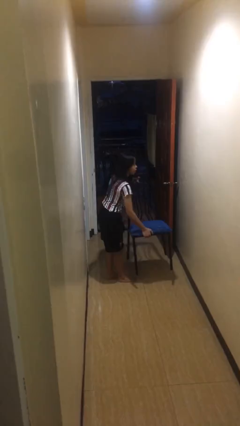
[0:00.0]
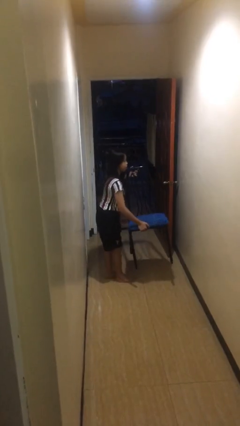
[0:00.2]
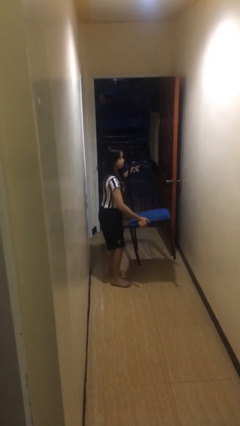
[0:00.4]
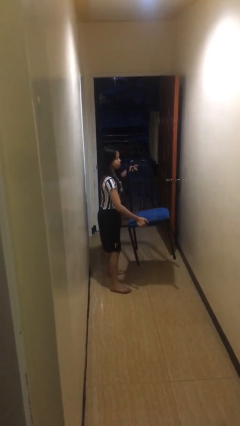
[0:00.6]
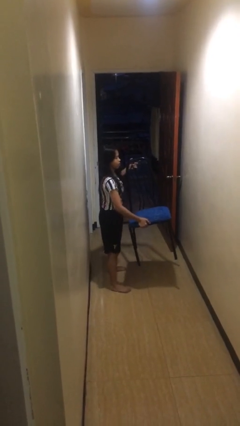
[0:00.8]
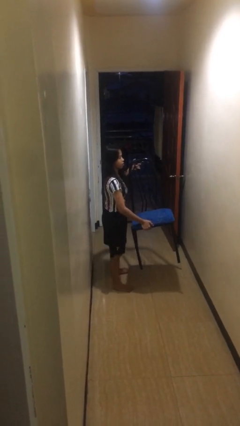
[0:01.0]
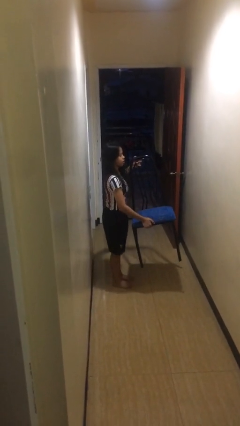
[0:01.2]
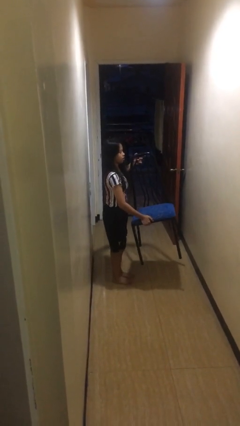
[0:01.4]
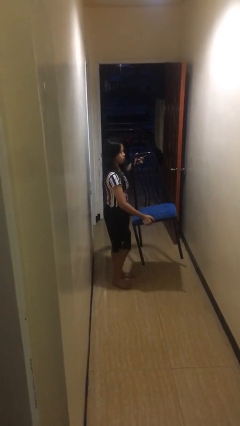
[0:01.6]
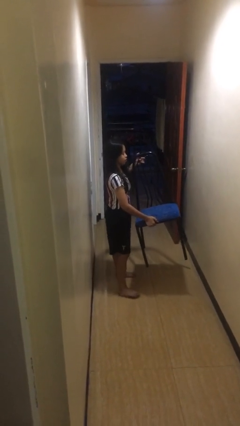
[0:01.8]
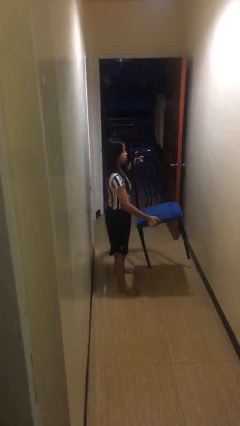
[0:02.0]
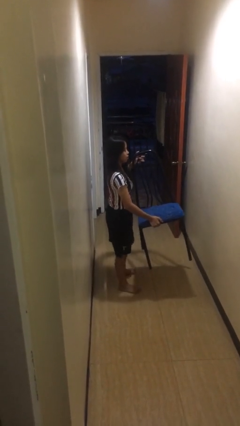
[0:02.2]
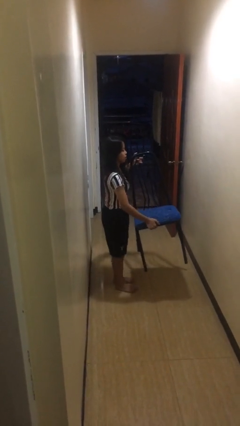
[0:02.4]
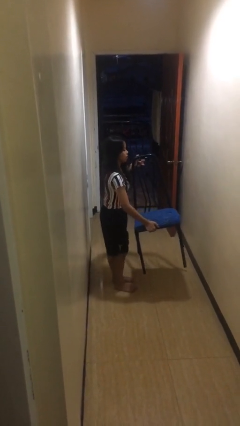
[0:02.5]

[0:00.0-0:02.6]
person carries heavy object

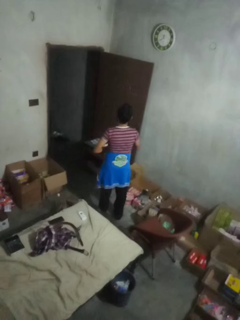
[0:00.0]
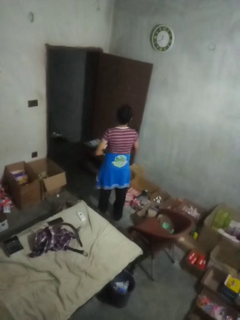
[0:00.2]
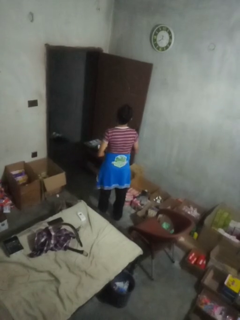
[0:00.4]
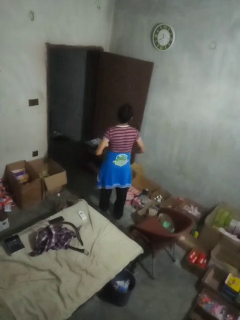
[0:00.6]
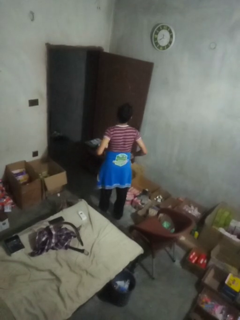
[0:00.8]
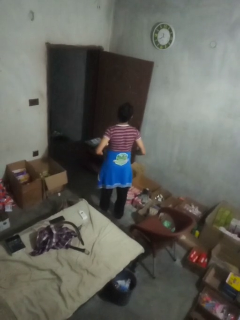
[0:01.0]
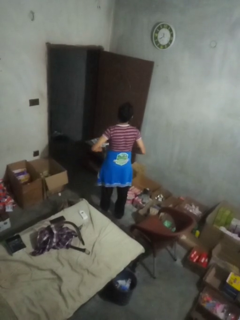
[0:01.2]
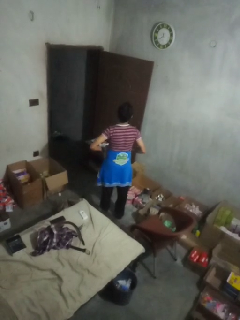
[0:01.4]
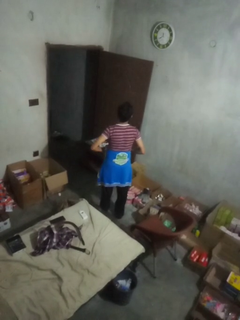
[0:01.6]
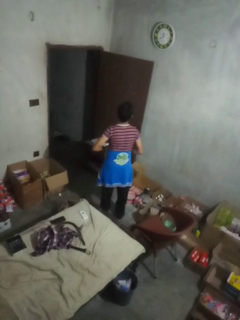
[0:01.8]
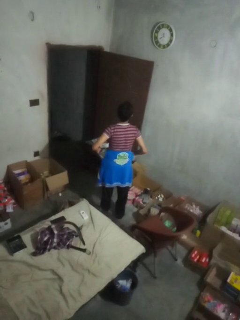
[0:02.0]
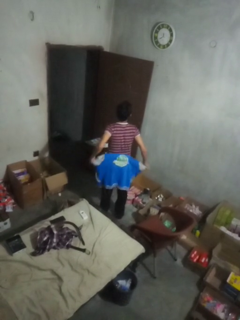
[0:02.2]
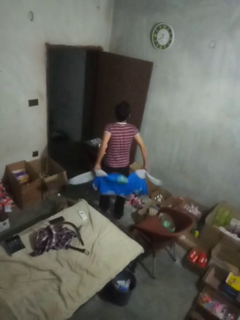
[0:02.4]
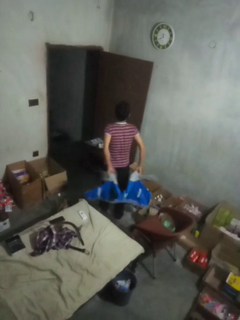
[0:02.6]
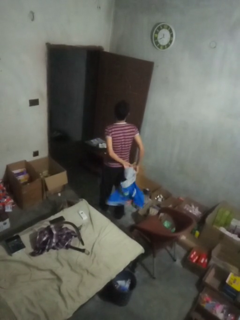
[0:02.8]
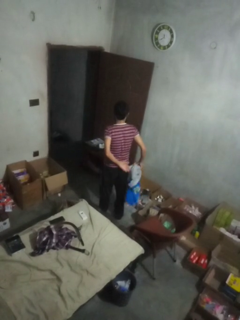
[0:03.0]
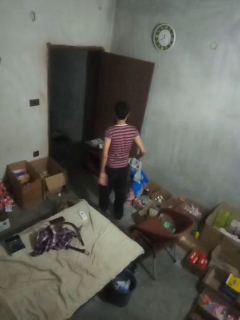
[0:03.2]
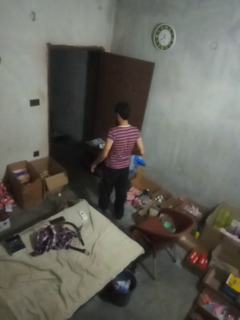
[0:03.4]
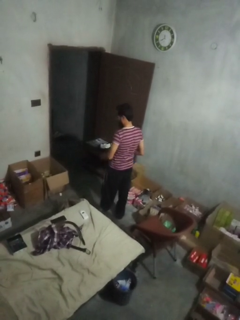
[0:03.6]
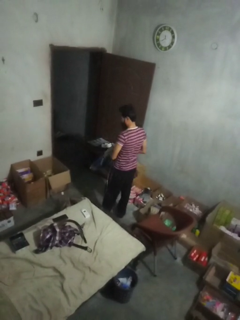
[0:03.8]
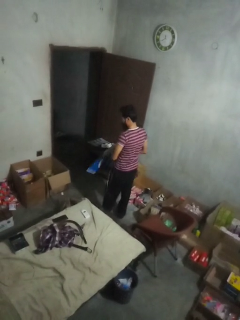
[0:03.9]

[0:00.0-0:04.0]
person unties jacket around waist

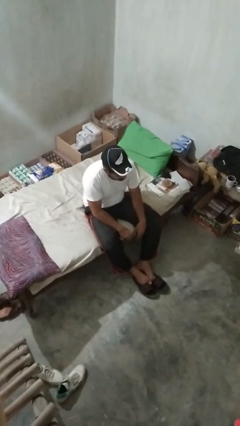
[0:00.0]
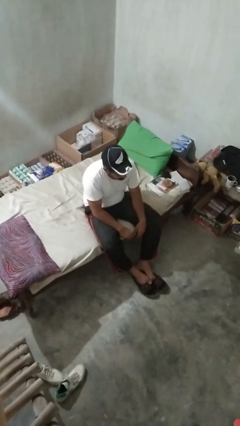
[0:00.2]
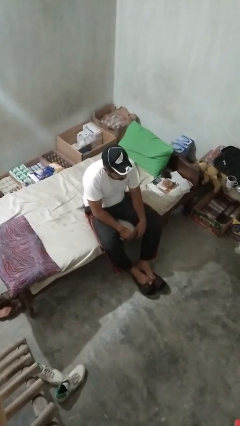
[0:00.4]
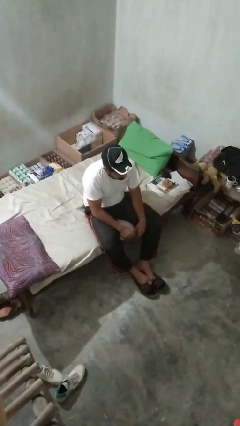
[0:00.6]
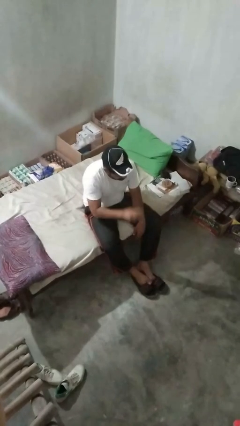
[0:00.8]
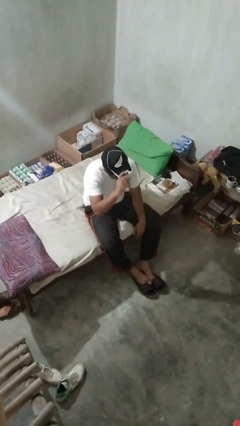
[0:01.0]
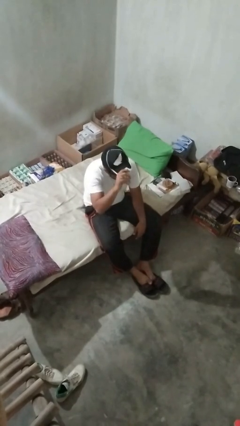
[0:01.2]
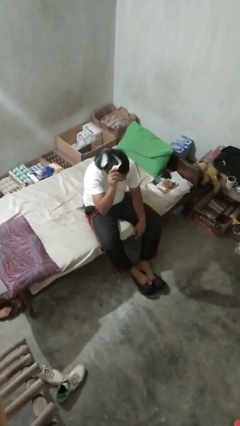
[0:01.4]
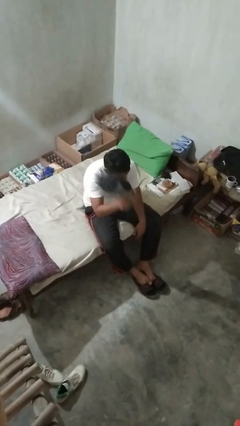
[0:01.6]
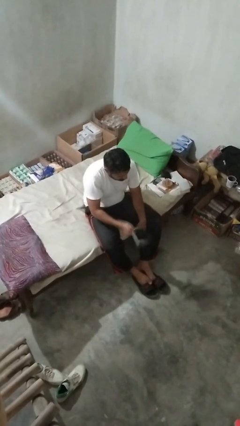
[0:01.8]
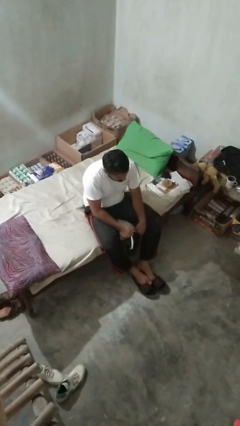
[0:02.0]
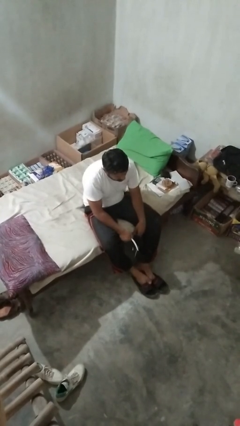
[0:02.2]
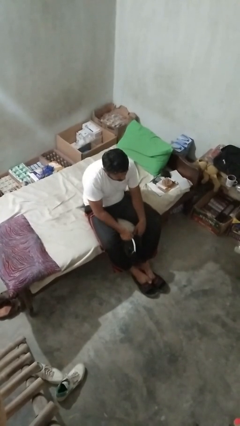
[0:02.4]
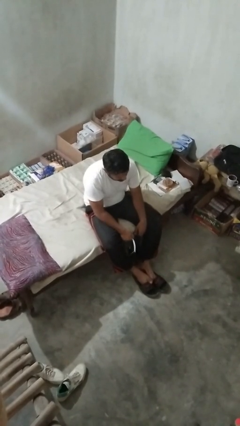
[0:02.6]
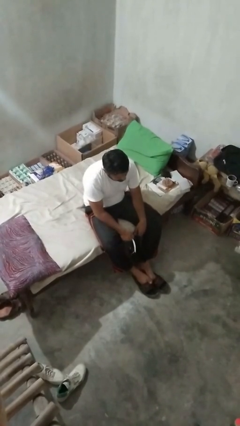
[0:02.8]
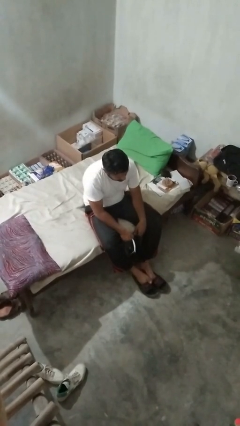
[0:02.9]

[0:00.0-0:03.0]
person takes off hat

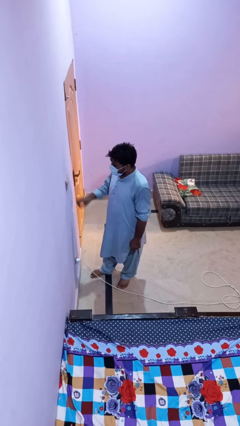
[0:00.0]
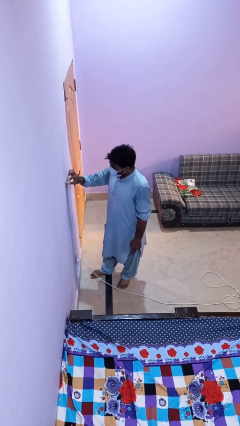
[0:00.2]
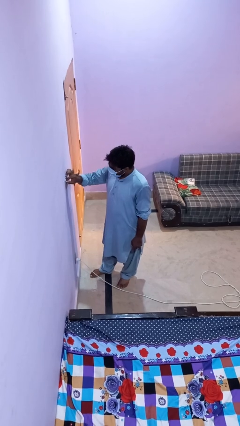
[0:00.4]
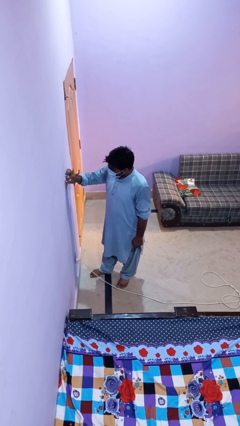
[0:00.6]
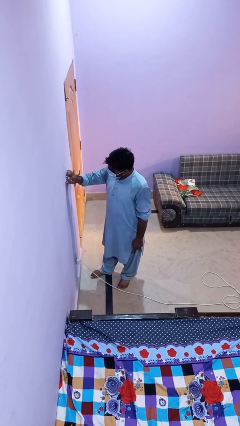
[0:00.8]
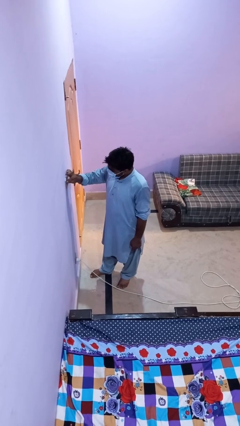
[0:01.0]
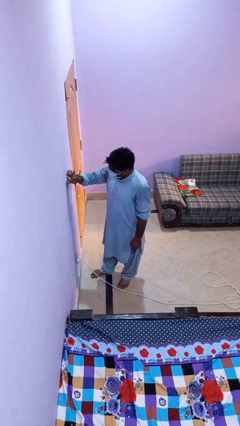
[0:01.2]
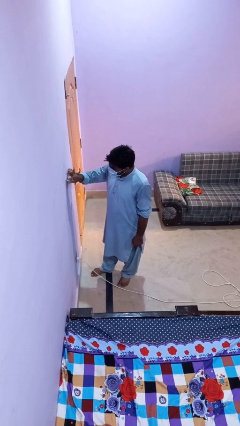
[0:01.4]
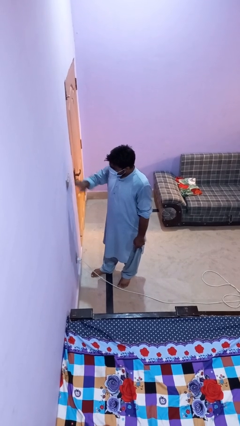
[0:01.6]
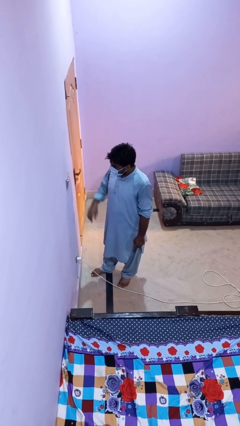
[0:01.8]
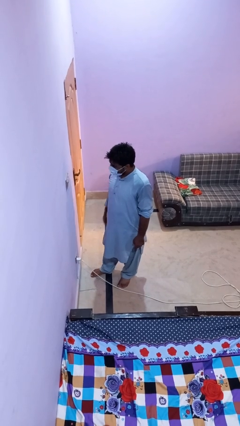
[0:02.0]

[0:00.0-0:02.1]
person adjusts thermostat

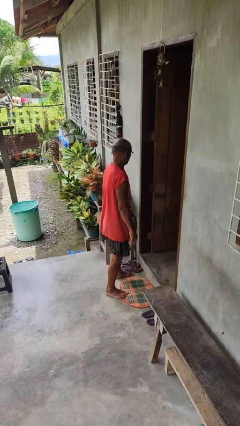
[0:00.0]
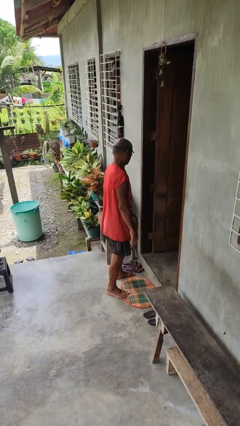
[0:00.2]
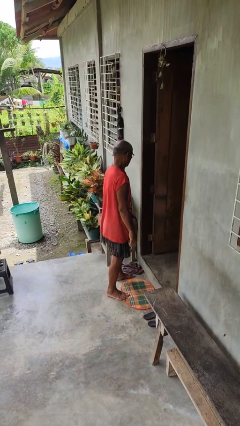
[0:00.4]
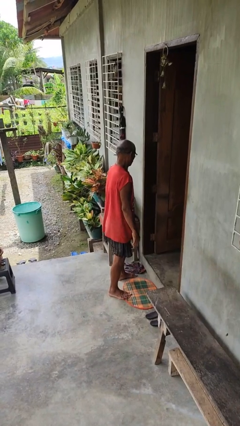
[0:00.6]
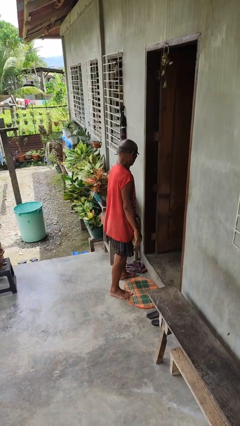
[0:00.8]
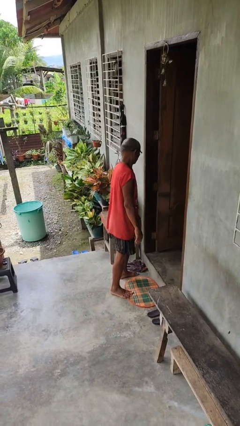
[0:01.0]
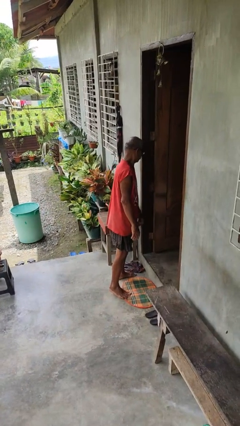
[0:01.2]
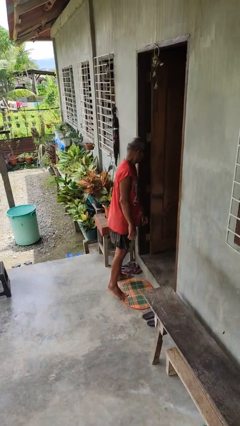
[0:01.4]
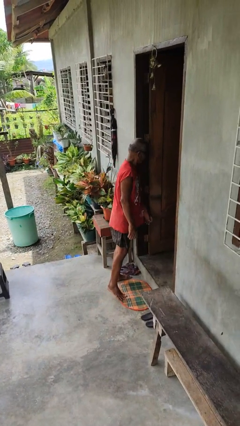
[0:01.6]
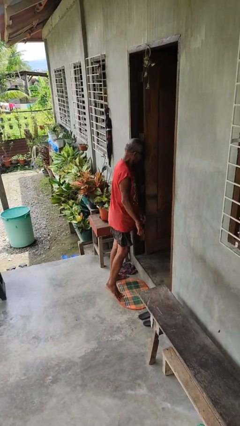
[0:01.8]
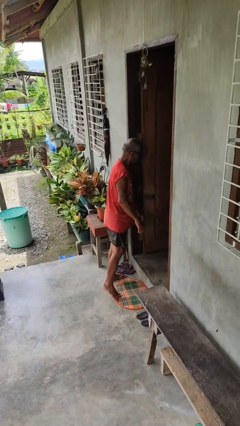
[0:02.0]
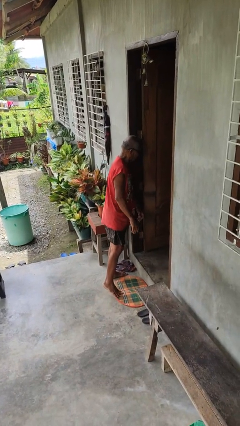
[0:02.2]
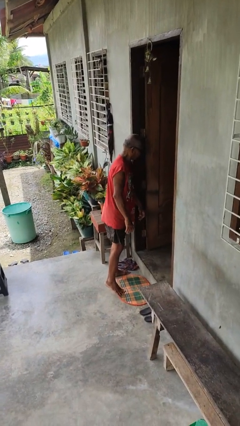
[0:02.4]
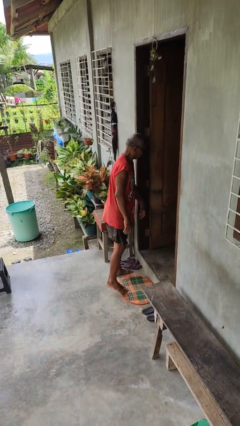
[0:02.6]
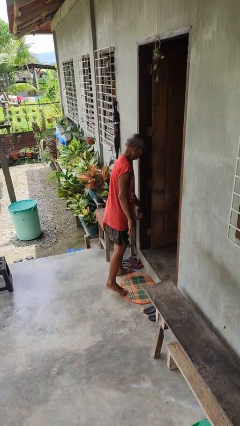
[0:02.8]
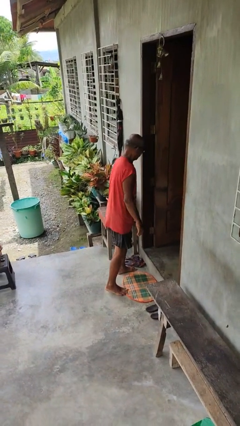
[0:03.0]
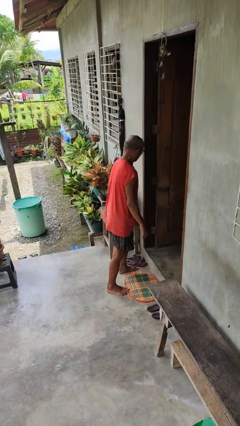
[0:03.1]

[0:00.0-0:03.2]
person bumps into wall

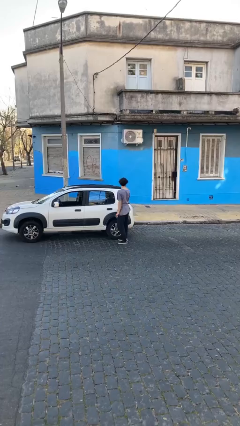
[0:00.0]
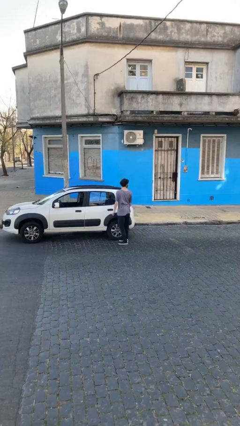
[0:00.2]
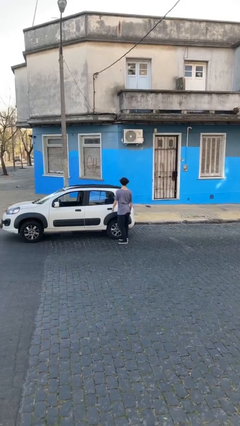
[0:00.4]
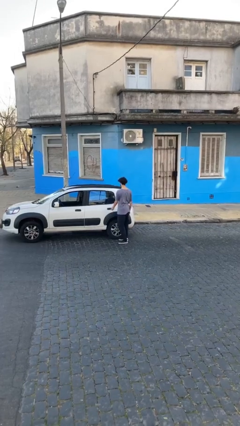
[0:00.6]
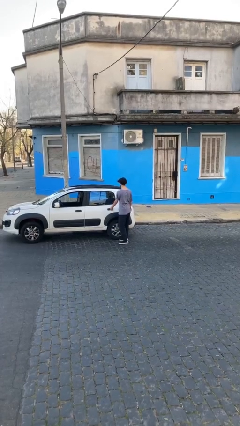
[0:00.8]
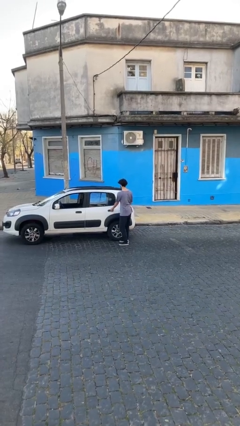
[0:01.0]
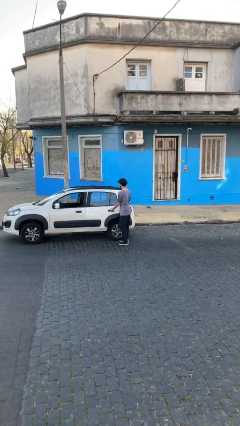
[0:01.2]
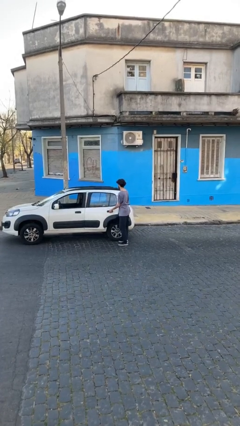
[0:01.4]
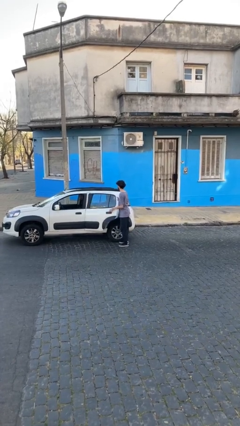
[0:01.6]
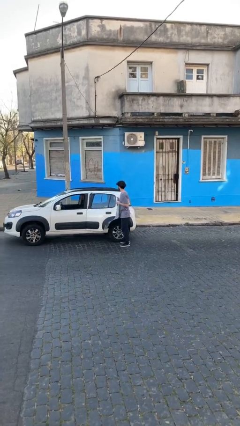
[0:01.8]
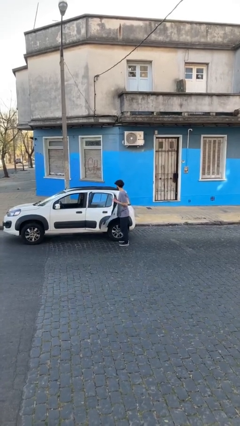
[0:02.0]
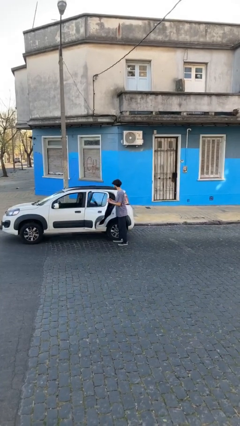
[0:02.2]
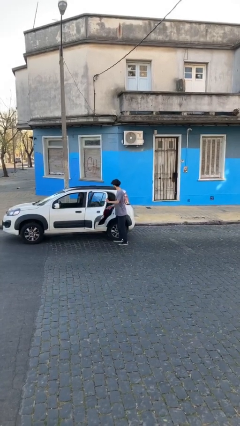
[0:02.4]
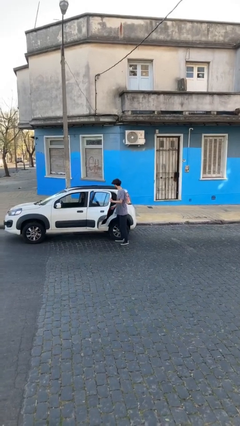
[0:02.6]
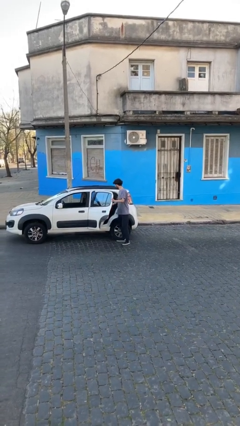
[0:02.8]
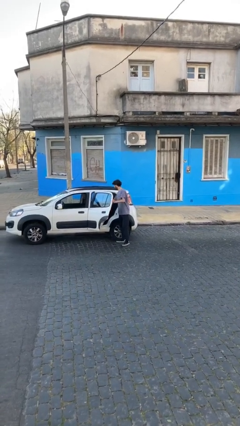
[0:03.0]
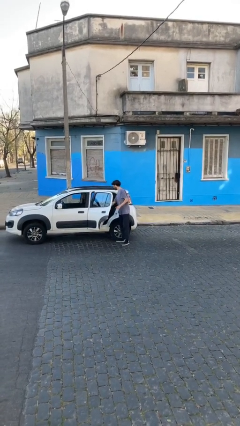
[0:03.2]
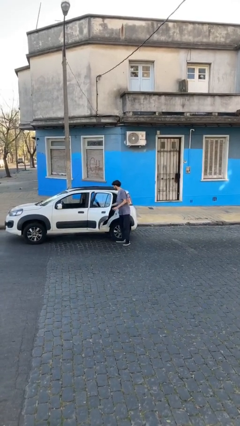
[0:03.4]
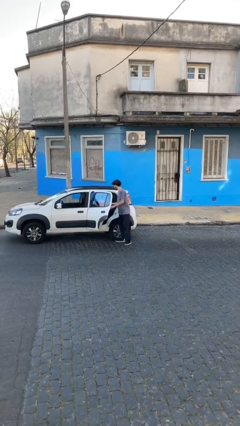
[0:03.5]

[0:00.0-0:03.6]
person opens car door
